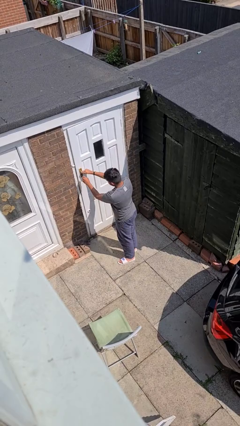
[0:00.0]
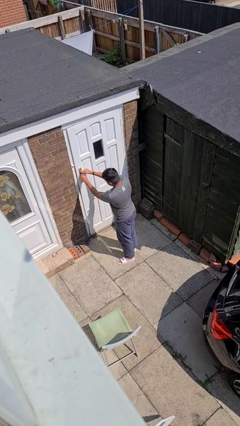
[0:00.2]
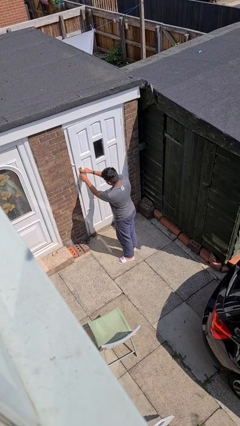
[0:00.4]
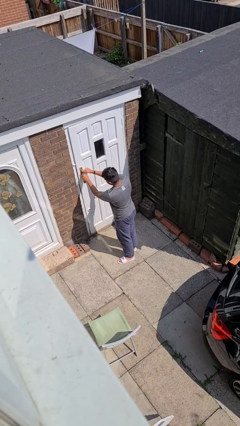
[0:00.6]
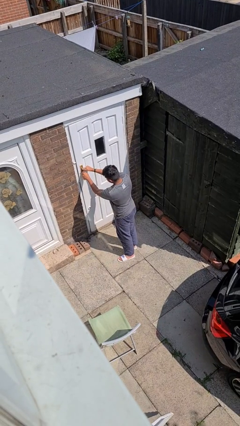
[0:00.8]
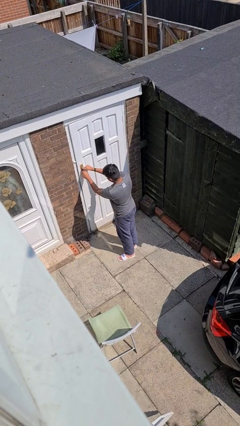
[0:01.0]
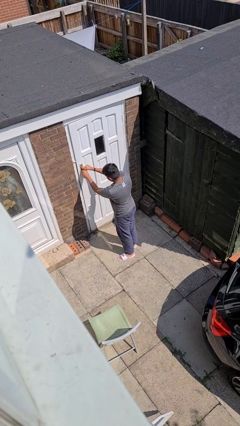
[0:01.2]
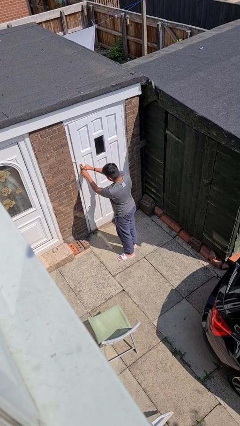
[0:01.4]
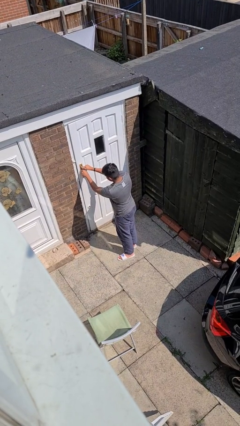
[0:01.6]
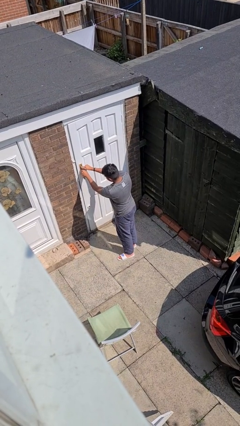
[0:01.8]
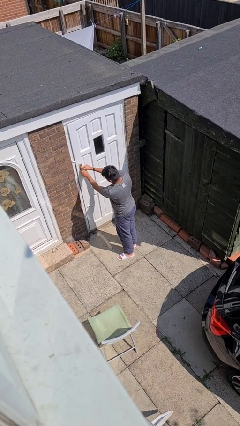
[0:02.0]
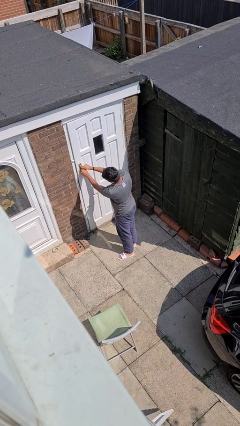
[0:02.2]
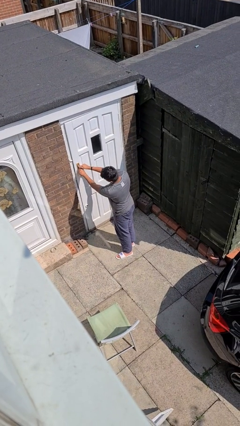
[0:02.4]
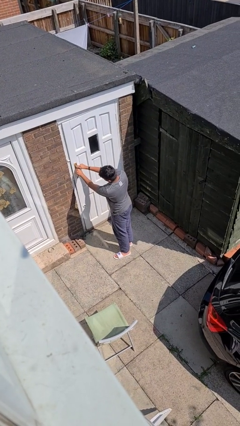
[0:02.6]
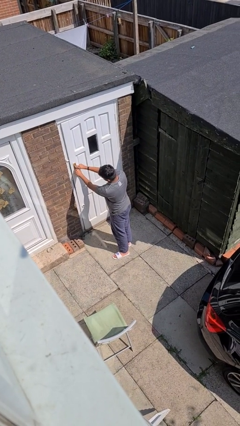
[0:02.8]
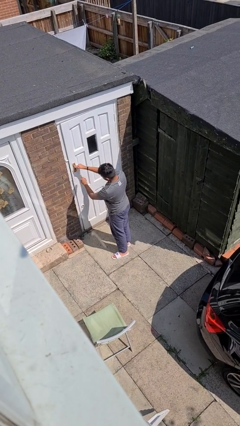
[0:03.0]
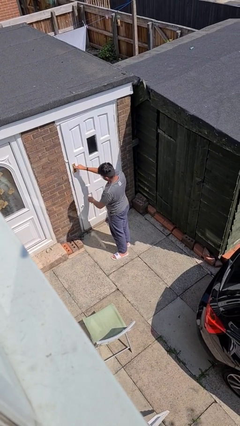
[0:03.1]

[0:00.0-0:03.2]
person locks door with keys

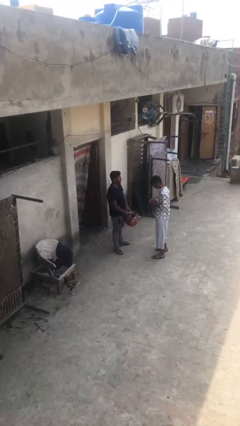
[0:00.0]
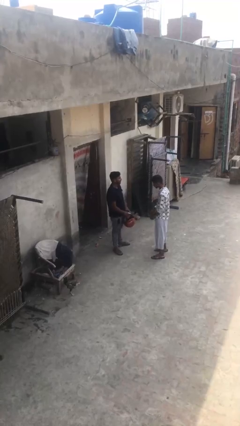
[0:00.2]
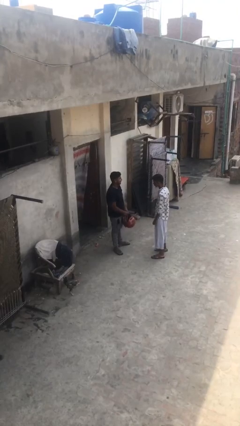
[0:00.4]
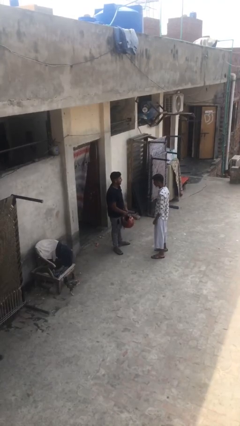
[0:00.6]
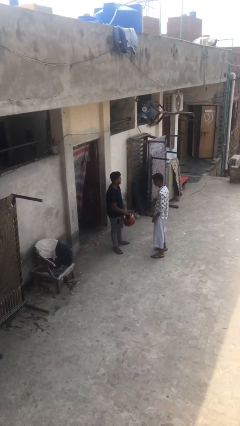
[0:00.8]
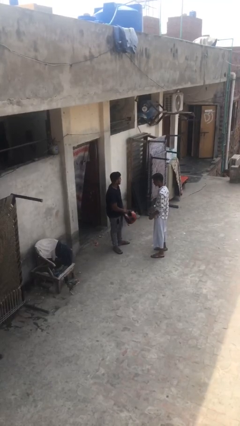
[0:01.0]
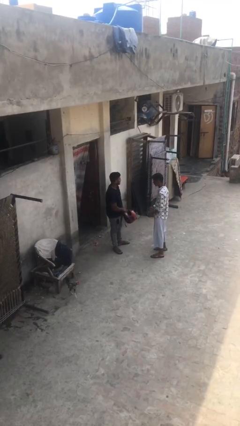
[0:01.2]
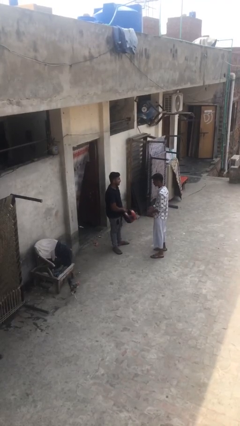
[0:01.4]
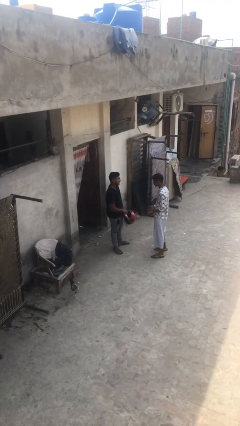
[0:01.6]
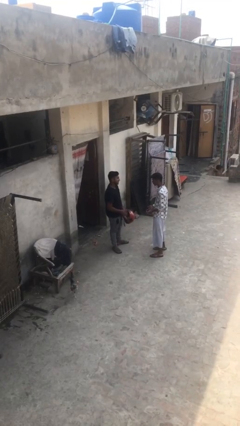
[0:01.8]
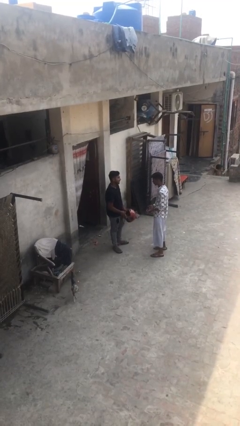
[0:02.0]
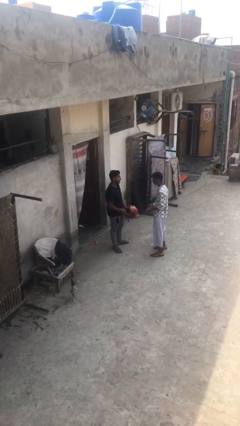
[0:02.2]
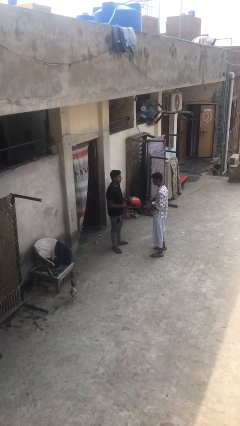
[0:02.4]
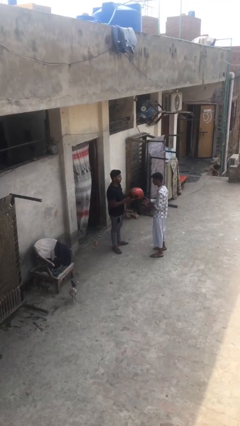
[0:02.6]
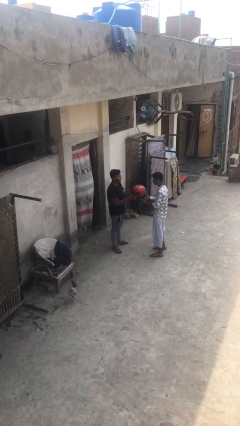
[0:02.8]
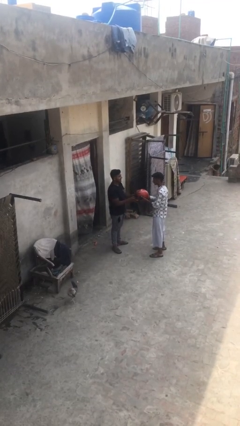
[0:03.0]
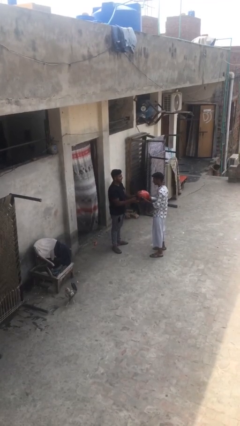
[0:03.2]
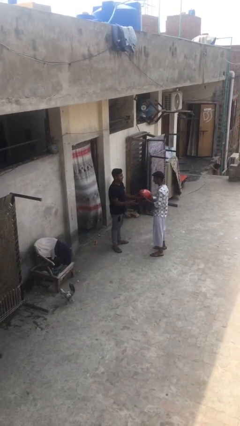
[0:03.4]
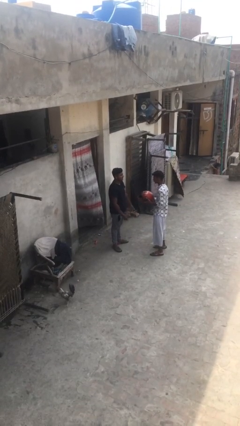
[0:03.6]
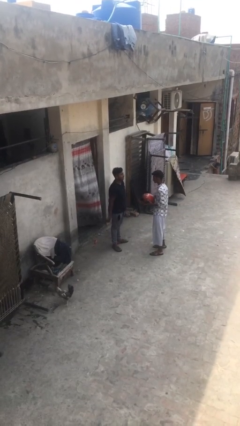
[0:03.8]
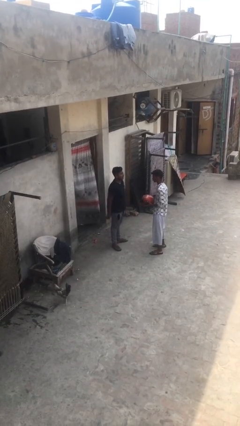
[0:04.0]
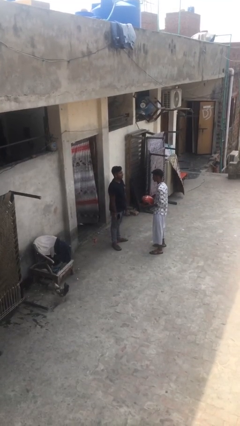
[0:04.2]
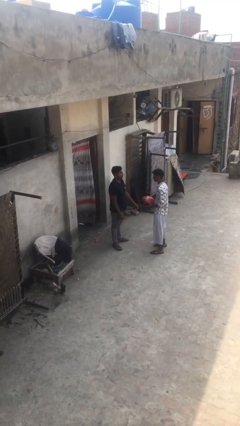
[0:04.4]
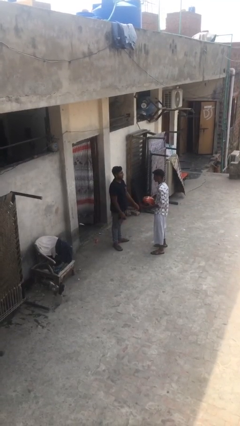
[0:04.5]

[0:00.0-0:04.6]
person transfers object to person

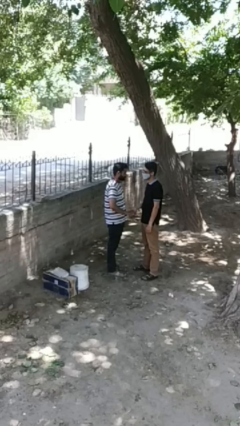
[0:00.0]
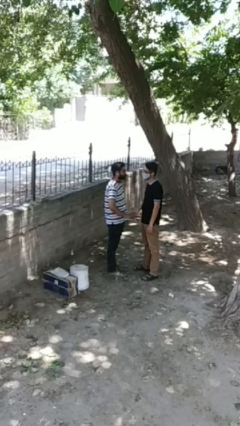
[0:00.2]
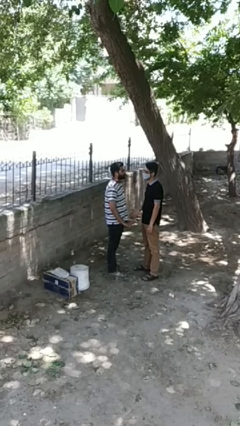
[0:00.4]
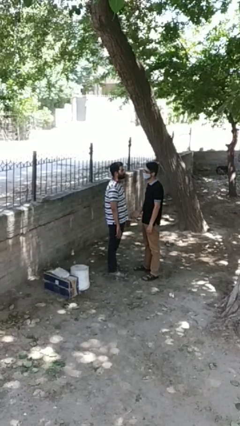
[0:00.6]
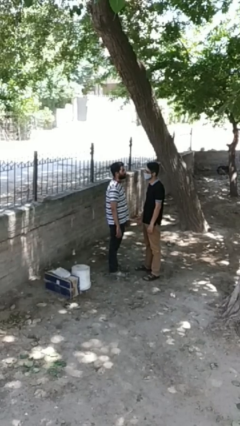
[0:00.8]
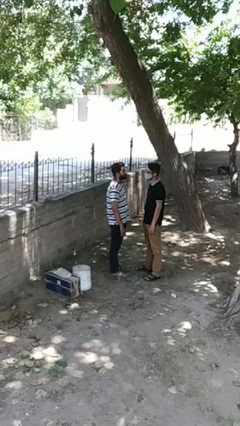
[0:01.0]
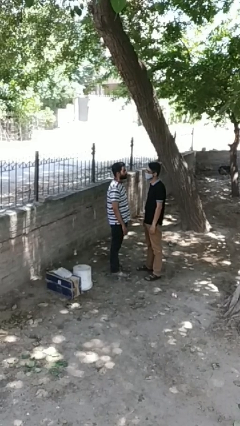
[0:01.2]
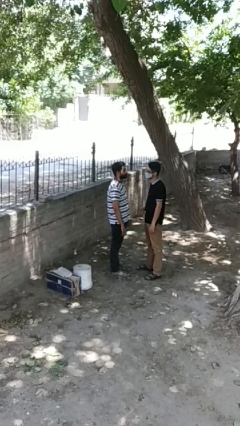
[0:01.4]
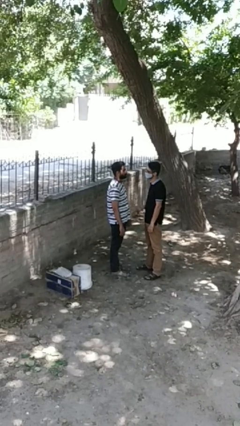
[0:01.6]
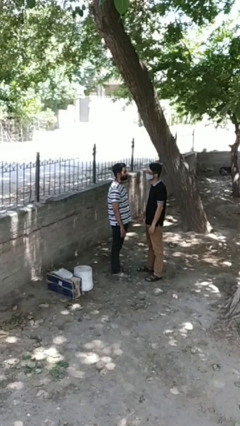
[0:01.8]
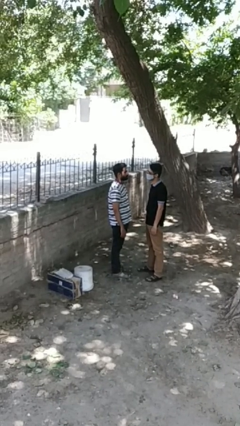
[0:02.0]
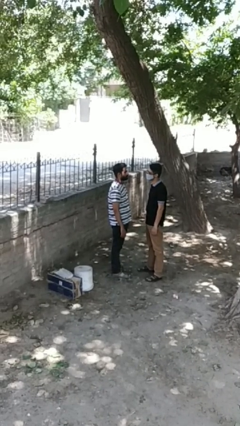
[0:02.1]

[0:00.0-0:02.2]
person highfives hand

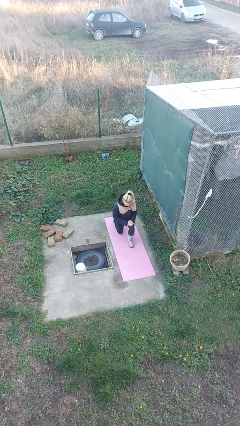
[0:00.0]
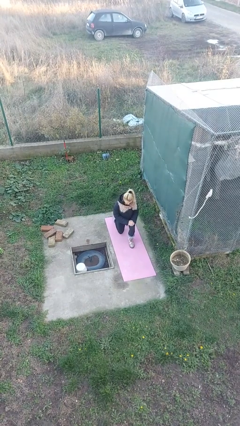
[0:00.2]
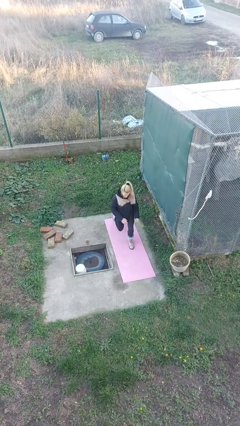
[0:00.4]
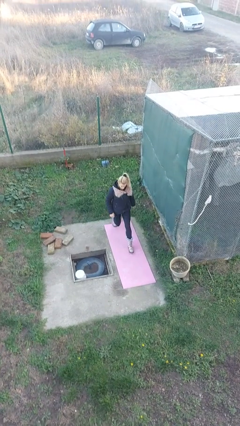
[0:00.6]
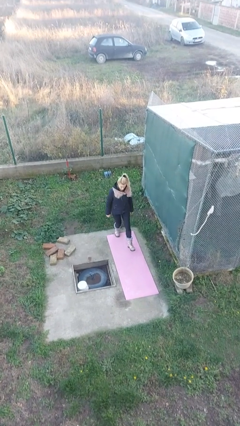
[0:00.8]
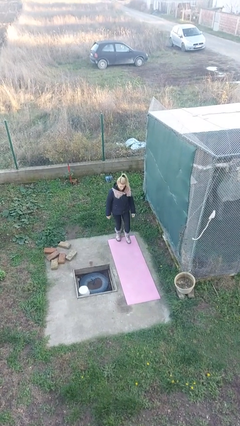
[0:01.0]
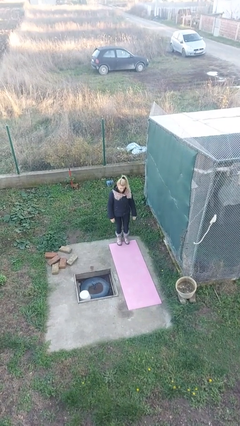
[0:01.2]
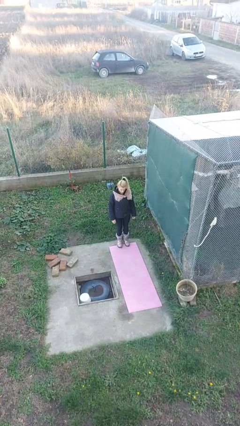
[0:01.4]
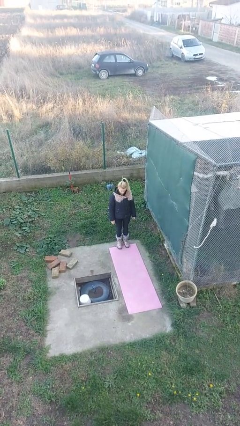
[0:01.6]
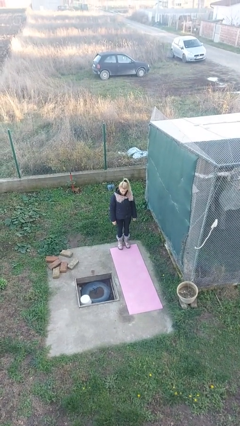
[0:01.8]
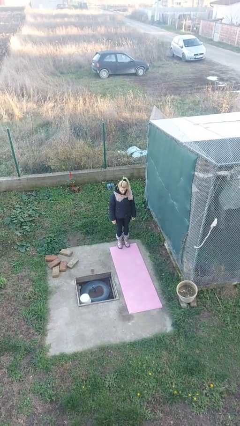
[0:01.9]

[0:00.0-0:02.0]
person stands up from floor

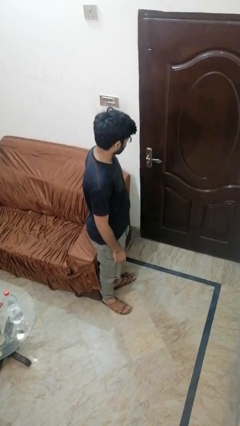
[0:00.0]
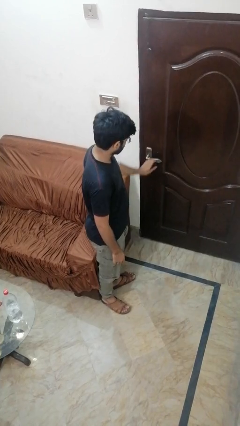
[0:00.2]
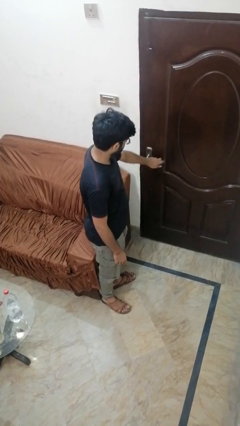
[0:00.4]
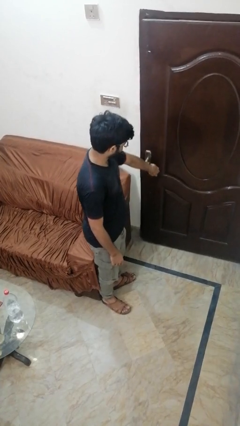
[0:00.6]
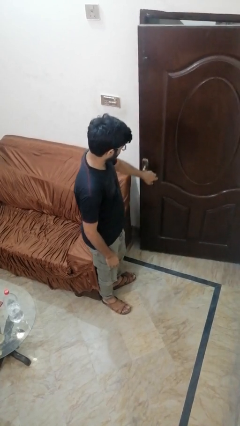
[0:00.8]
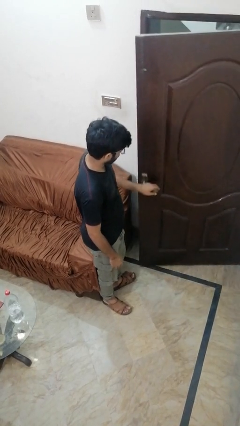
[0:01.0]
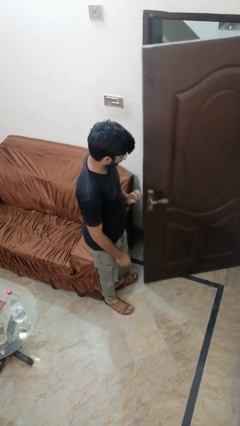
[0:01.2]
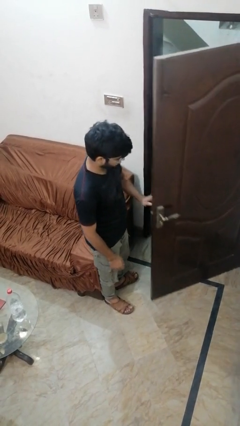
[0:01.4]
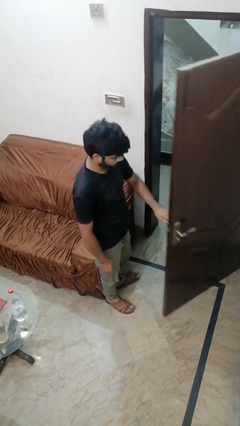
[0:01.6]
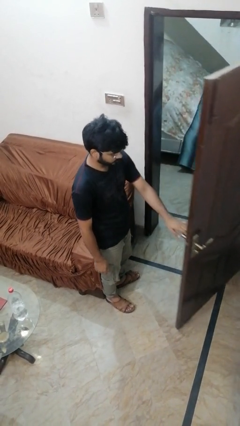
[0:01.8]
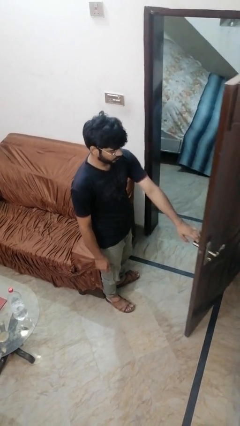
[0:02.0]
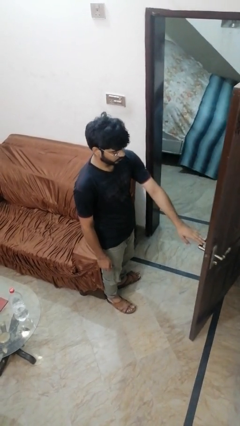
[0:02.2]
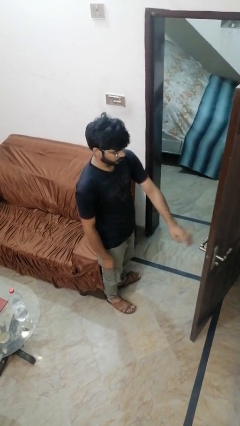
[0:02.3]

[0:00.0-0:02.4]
person opens facility door

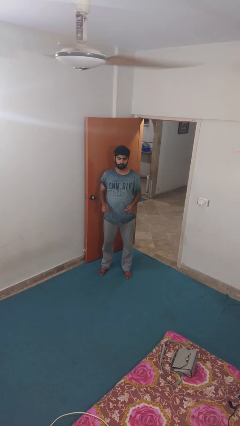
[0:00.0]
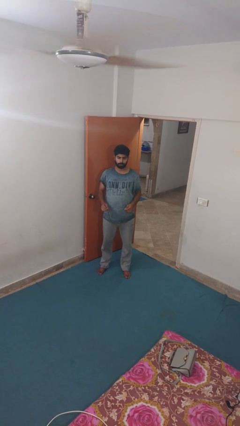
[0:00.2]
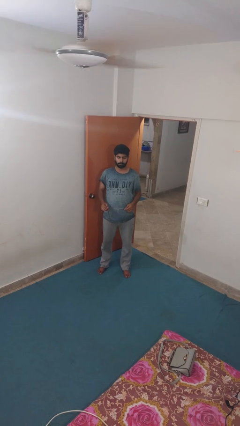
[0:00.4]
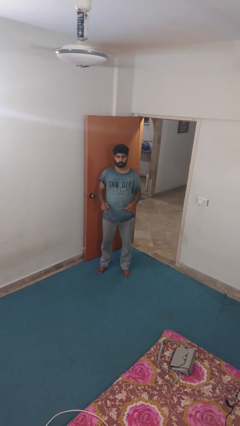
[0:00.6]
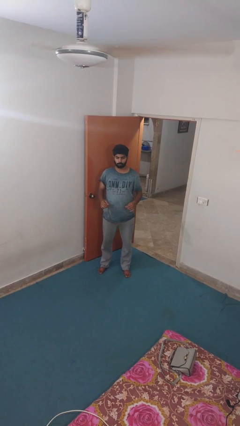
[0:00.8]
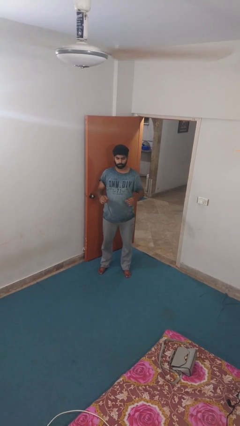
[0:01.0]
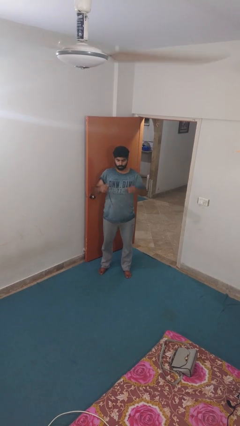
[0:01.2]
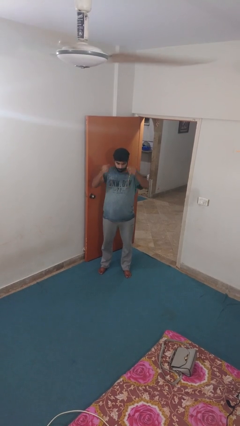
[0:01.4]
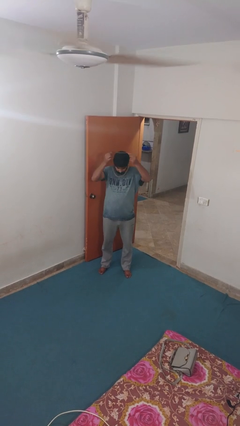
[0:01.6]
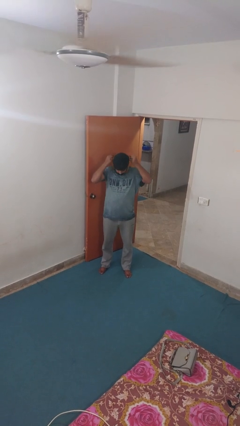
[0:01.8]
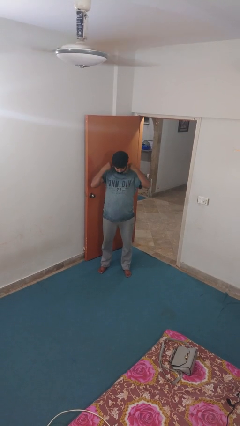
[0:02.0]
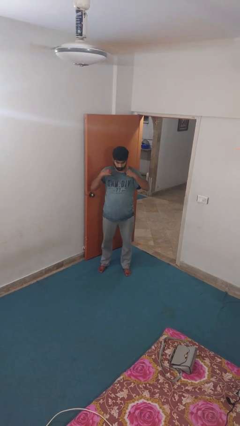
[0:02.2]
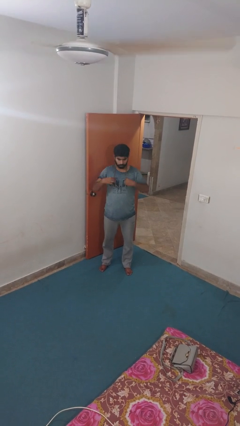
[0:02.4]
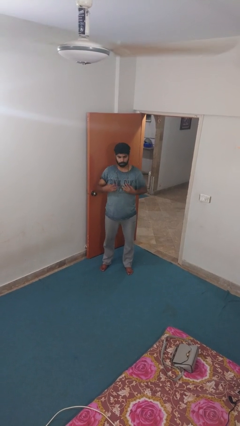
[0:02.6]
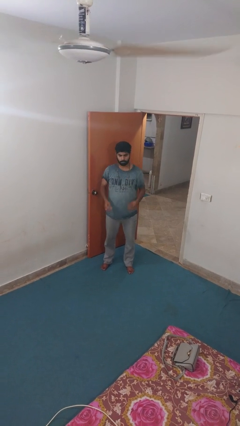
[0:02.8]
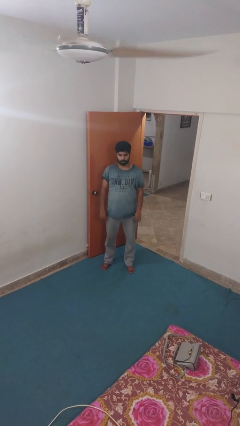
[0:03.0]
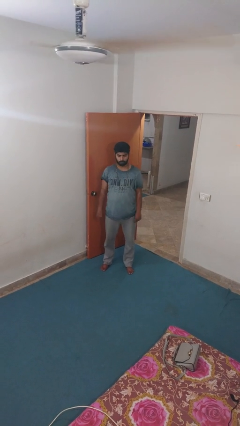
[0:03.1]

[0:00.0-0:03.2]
person puts on necklace
